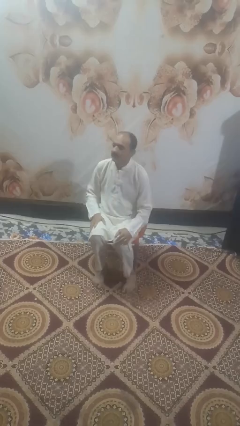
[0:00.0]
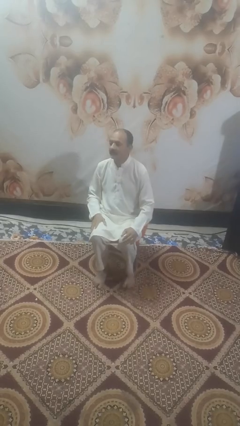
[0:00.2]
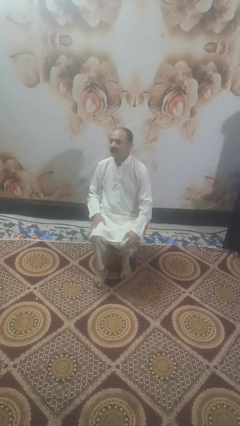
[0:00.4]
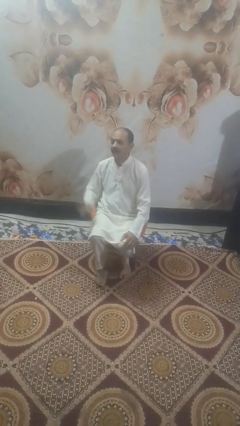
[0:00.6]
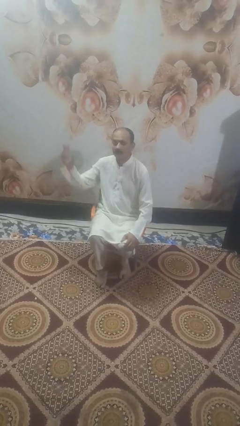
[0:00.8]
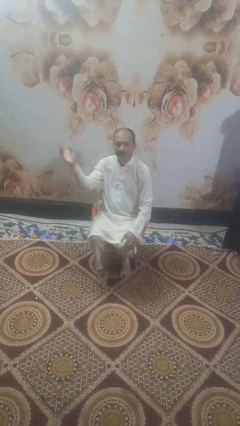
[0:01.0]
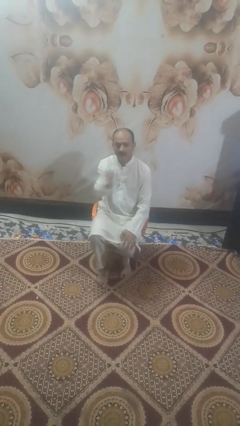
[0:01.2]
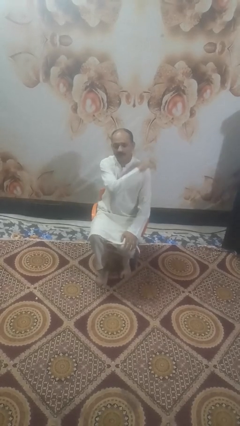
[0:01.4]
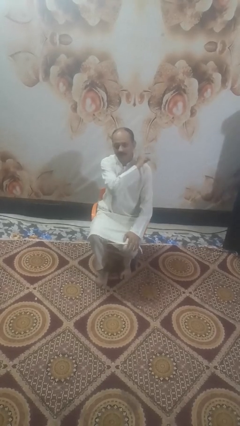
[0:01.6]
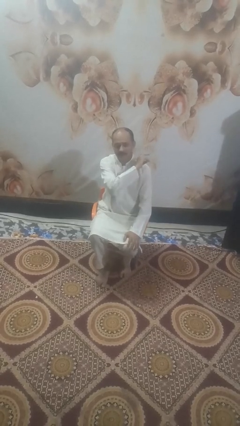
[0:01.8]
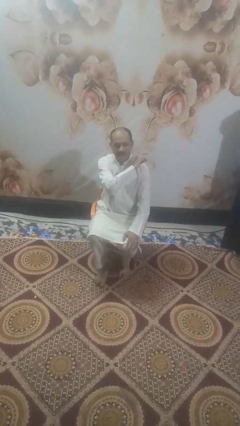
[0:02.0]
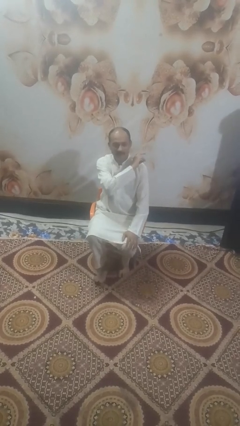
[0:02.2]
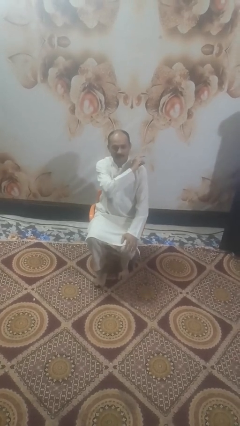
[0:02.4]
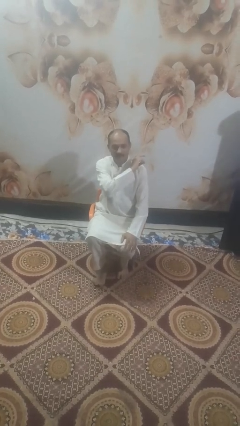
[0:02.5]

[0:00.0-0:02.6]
person gestures swipe left

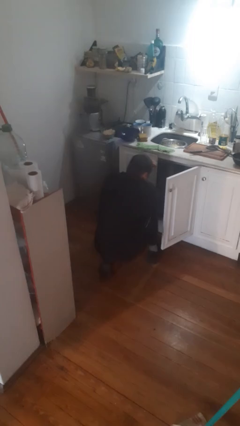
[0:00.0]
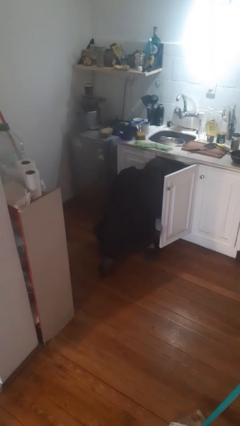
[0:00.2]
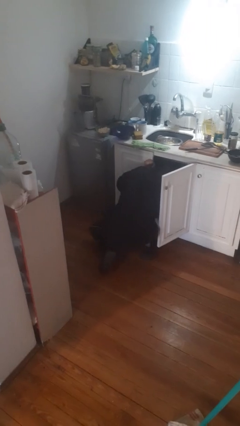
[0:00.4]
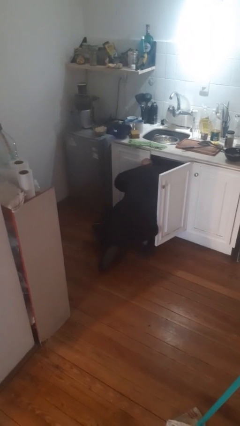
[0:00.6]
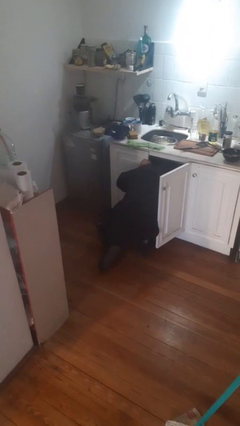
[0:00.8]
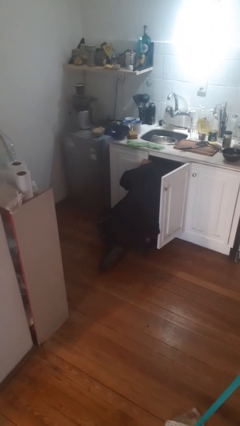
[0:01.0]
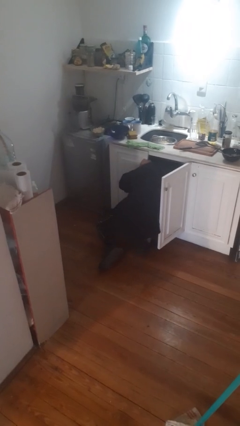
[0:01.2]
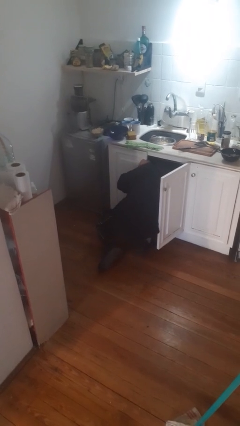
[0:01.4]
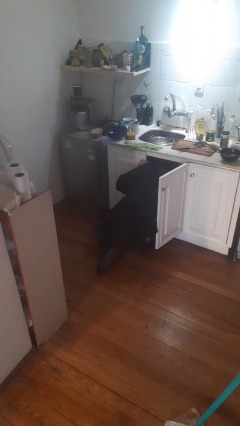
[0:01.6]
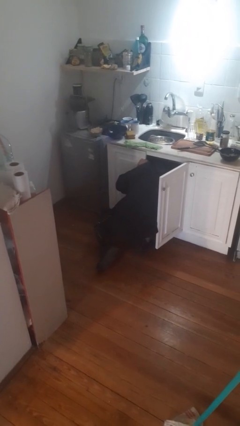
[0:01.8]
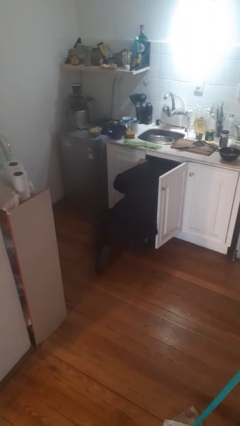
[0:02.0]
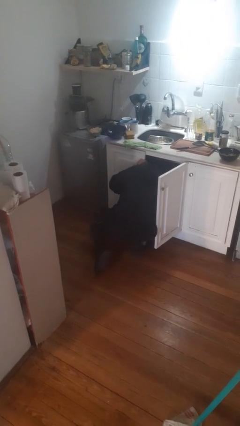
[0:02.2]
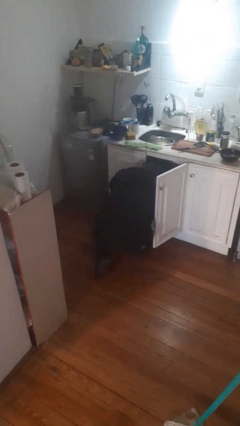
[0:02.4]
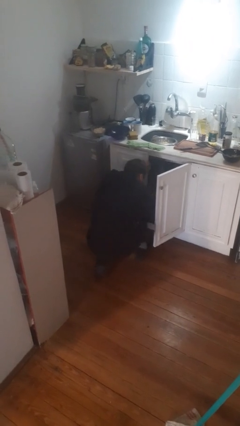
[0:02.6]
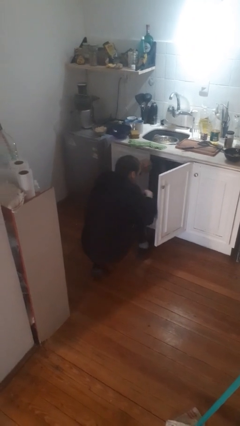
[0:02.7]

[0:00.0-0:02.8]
person searches in cabinet

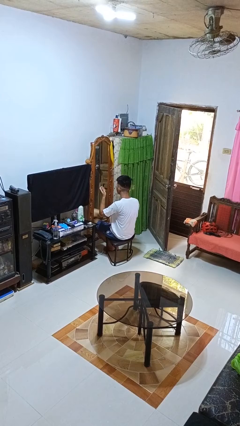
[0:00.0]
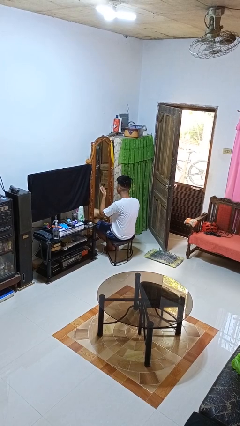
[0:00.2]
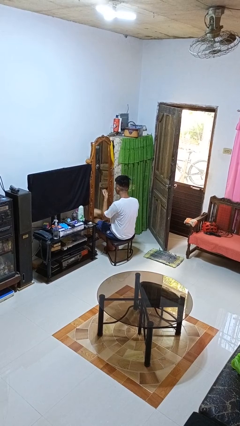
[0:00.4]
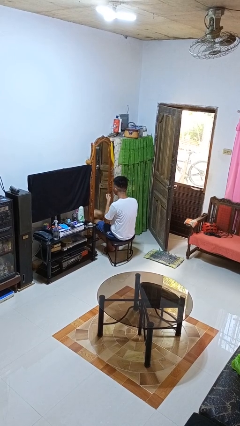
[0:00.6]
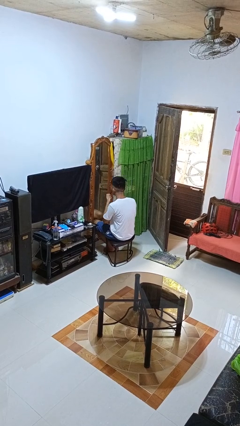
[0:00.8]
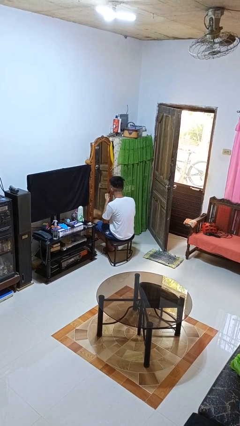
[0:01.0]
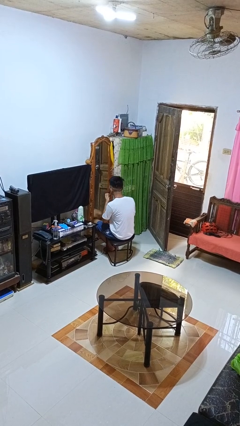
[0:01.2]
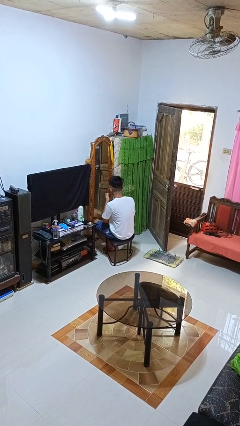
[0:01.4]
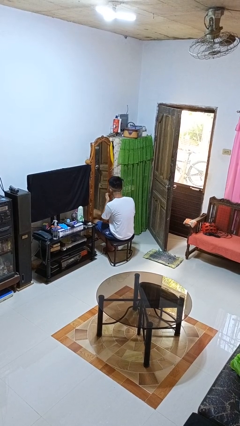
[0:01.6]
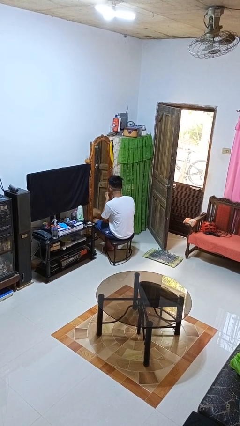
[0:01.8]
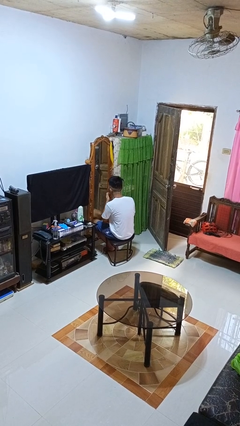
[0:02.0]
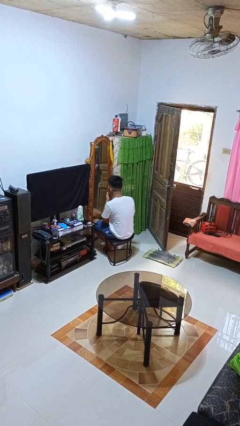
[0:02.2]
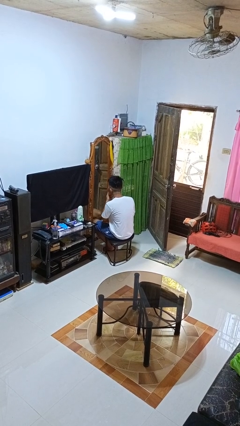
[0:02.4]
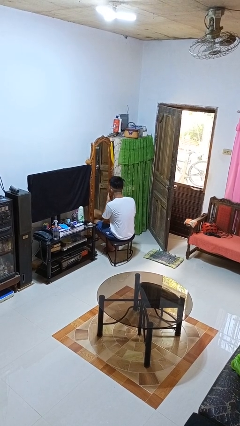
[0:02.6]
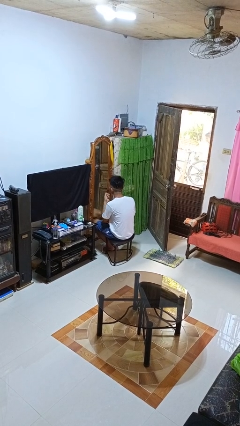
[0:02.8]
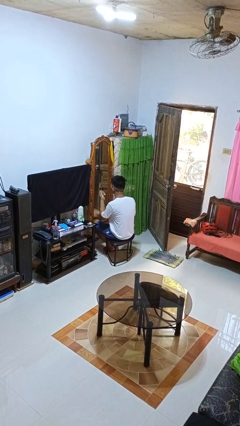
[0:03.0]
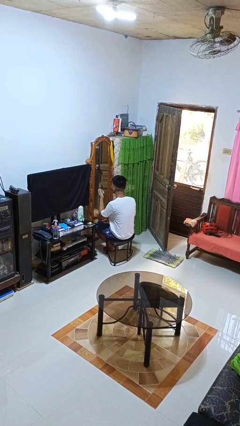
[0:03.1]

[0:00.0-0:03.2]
person applies lip makeup

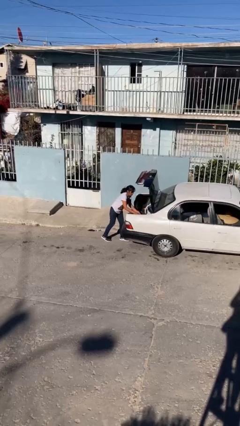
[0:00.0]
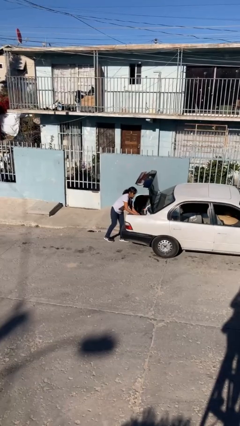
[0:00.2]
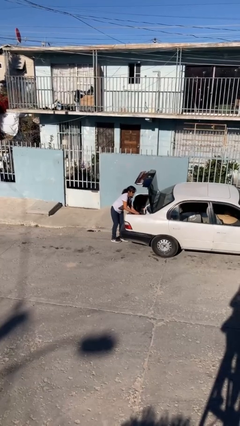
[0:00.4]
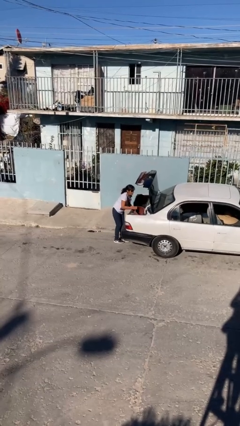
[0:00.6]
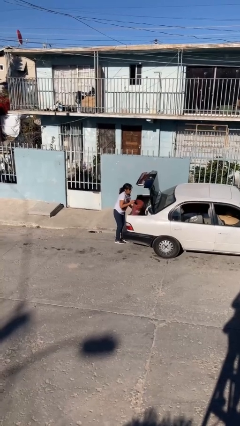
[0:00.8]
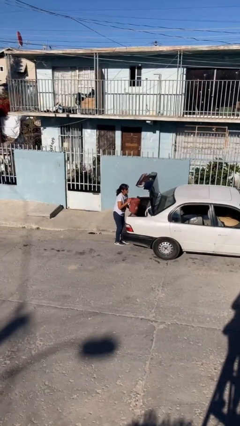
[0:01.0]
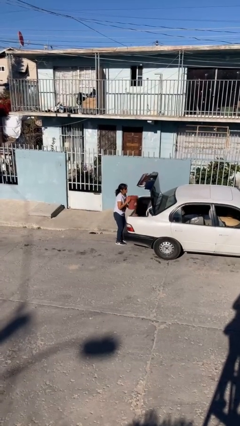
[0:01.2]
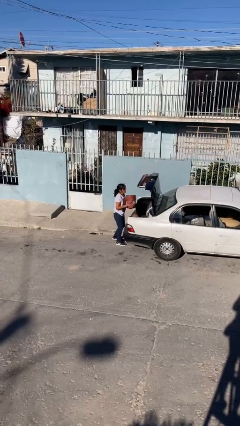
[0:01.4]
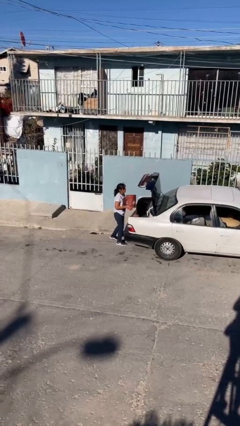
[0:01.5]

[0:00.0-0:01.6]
person unloads car

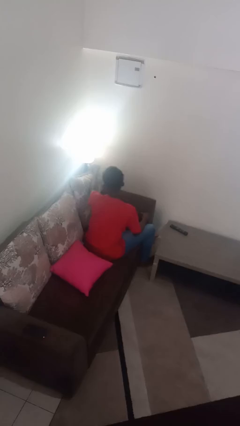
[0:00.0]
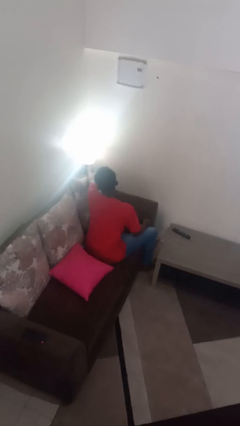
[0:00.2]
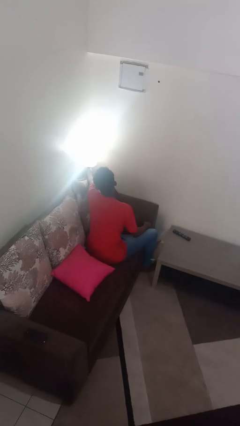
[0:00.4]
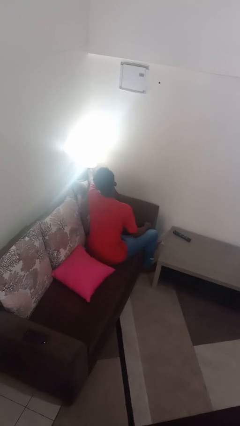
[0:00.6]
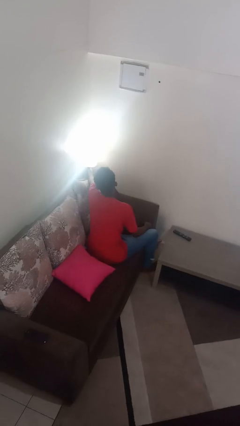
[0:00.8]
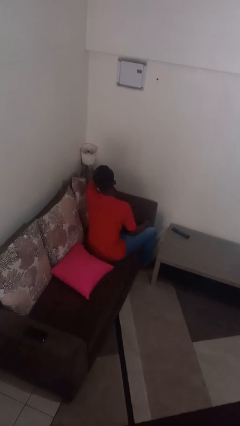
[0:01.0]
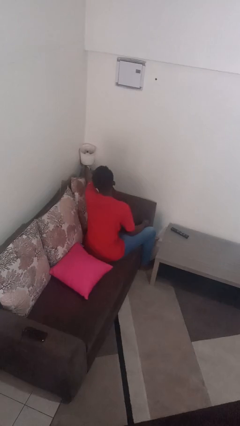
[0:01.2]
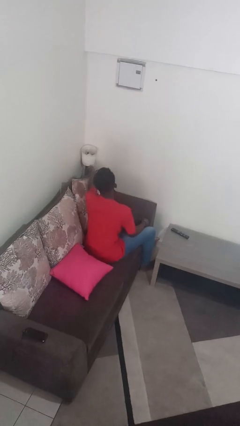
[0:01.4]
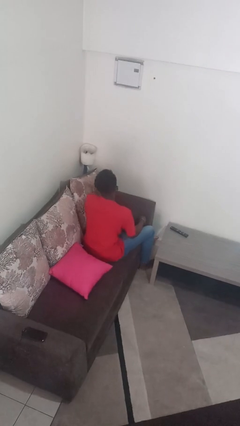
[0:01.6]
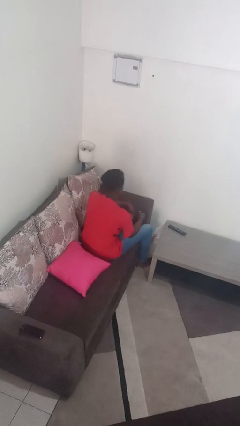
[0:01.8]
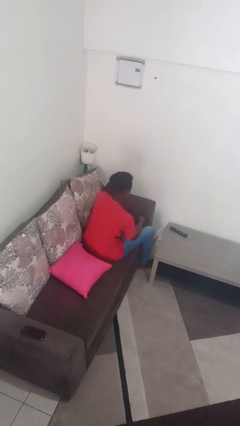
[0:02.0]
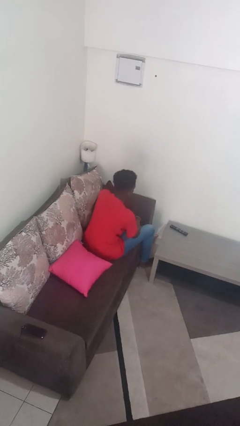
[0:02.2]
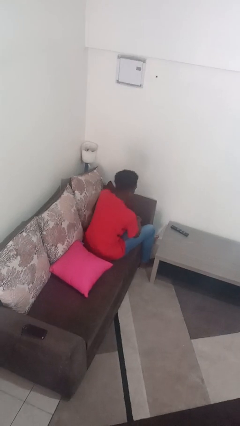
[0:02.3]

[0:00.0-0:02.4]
person turns off lamp

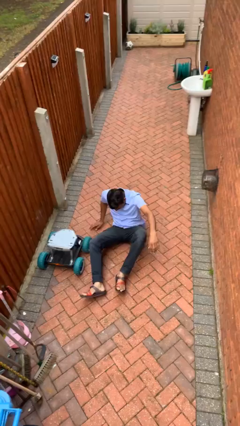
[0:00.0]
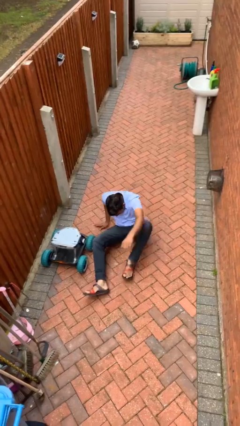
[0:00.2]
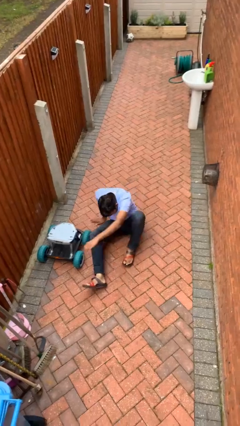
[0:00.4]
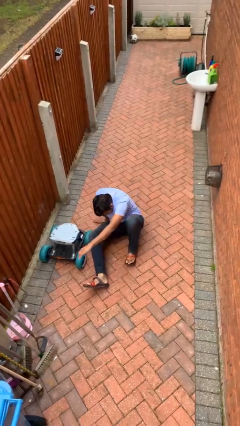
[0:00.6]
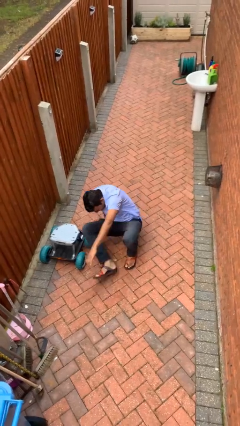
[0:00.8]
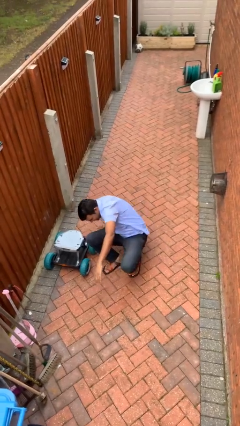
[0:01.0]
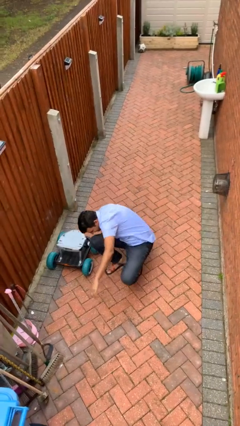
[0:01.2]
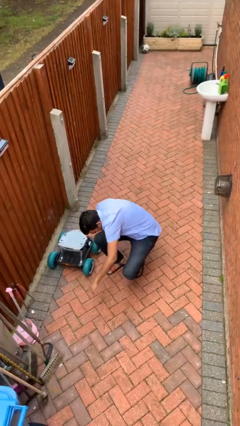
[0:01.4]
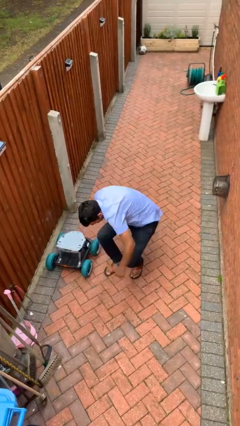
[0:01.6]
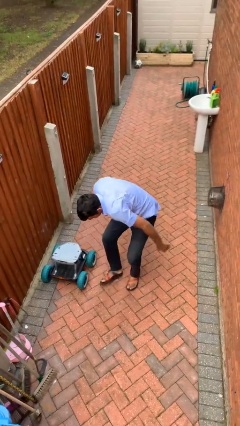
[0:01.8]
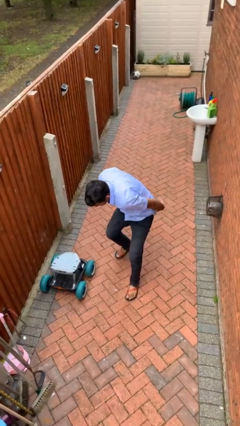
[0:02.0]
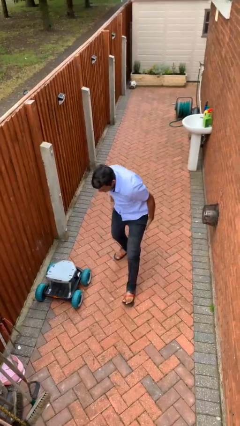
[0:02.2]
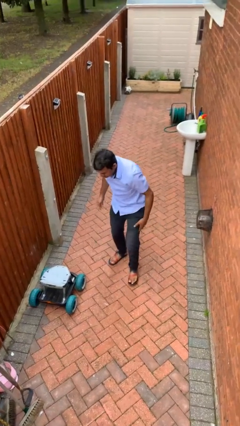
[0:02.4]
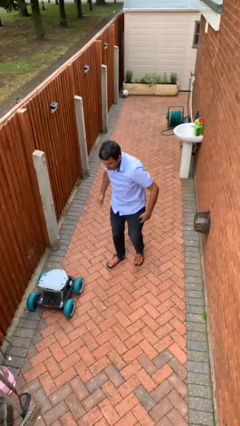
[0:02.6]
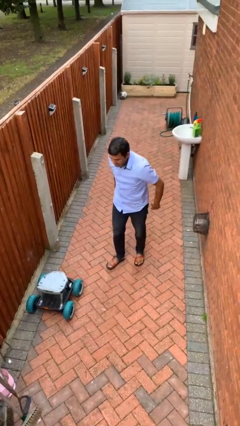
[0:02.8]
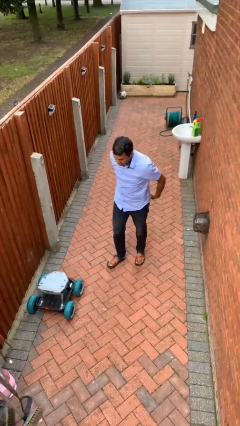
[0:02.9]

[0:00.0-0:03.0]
person stands up from floor

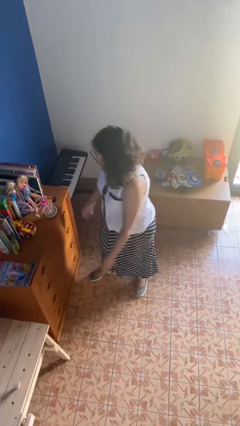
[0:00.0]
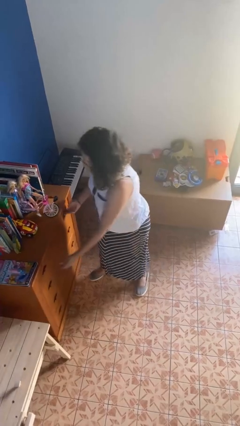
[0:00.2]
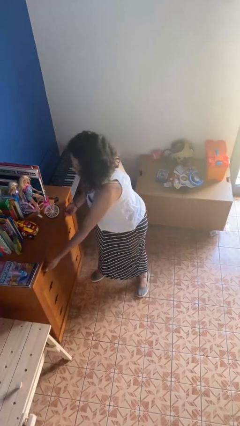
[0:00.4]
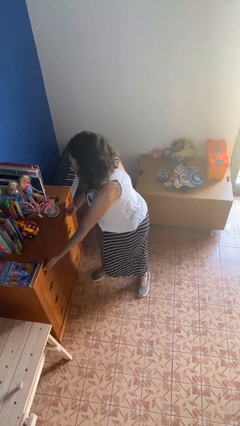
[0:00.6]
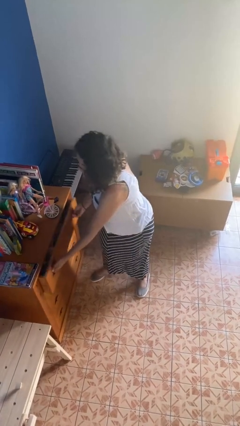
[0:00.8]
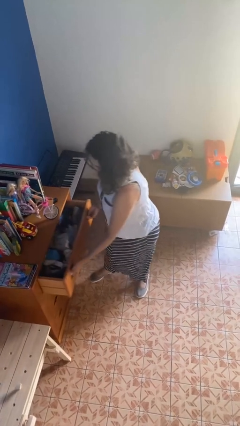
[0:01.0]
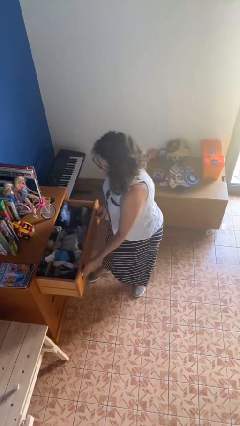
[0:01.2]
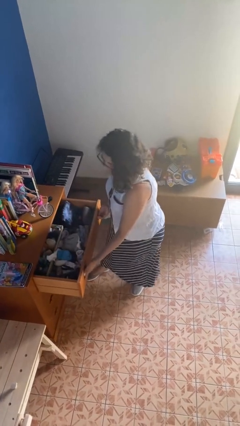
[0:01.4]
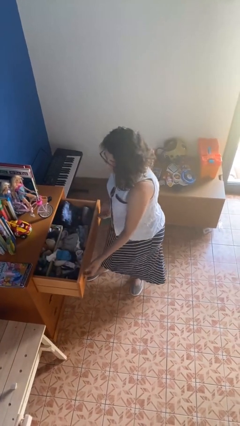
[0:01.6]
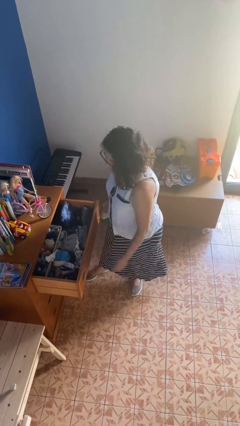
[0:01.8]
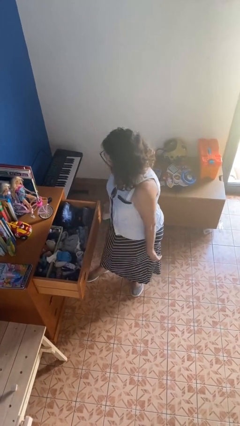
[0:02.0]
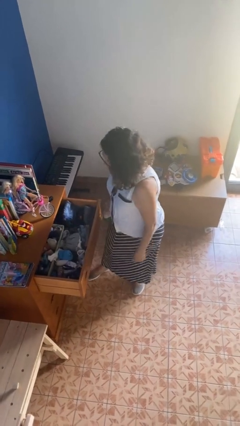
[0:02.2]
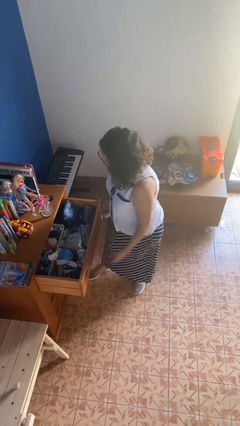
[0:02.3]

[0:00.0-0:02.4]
person opens dresser drawer
